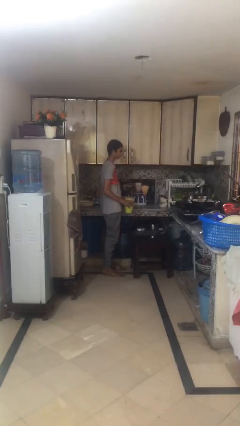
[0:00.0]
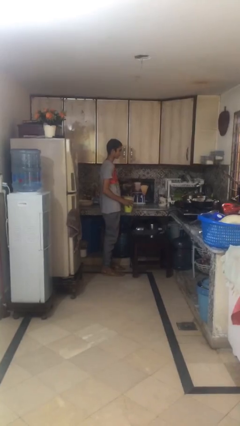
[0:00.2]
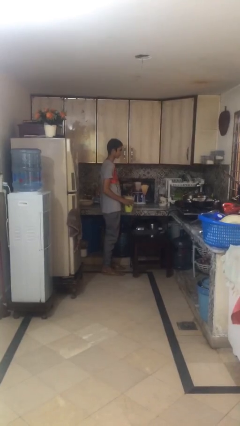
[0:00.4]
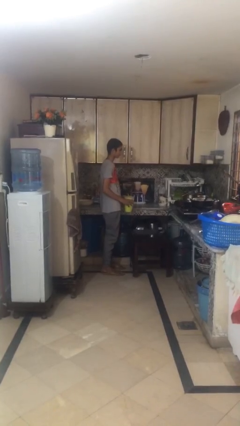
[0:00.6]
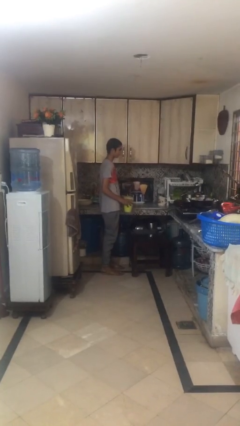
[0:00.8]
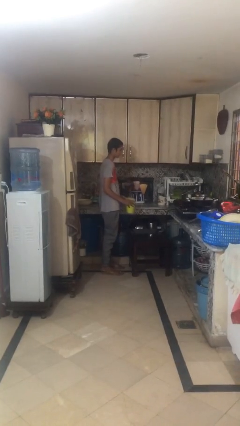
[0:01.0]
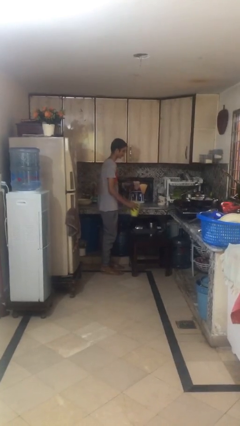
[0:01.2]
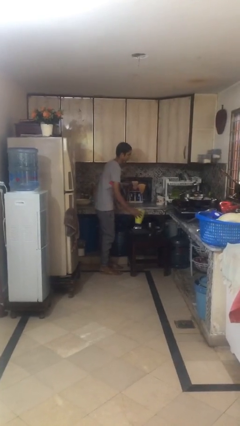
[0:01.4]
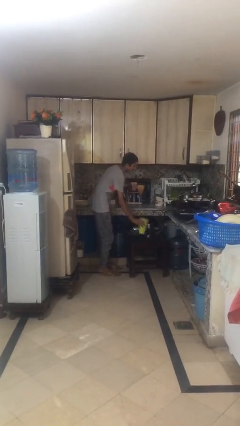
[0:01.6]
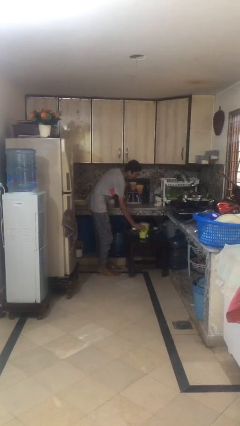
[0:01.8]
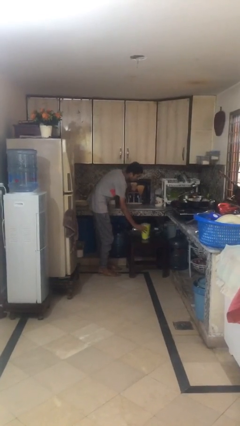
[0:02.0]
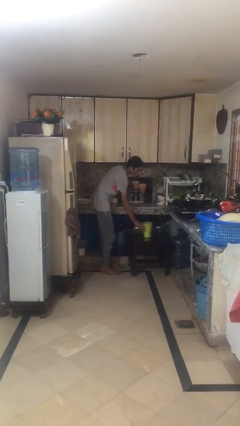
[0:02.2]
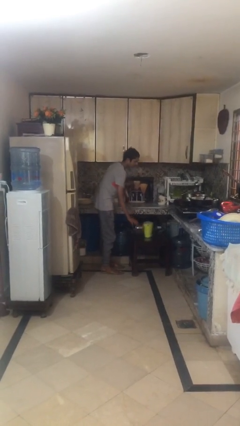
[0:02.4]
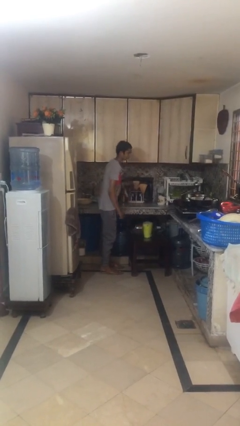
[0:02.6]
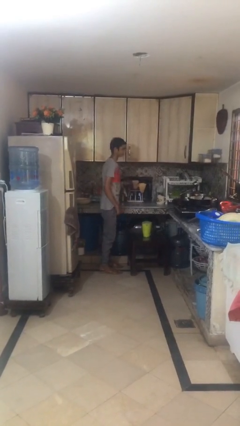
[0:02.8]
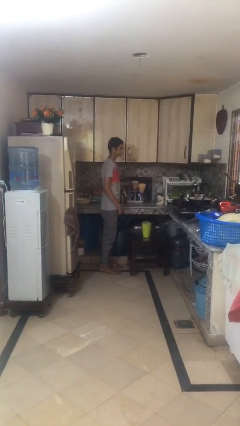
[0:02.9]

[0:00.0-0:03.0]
person puts down object on table

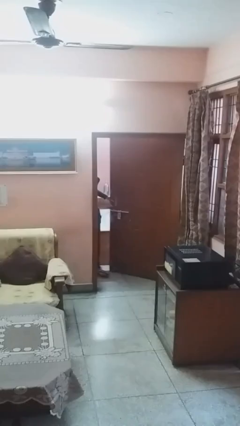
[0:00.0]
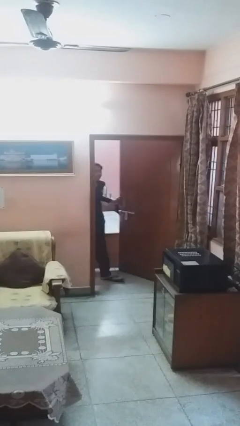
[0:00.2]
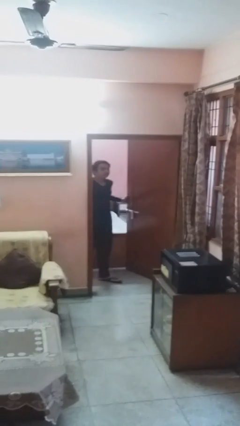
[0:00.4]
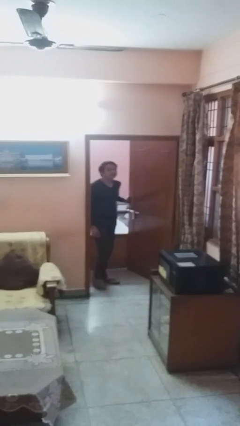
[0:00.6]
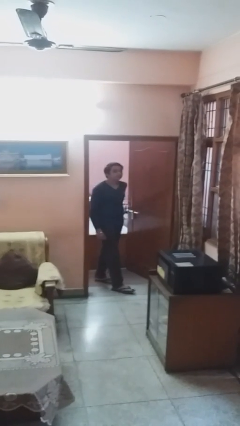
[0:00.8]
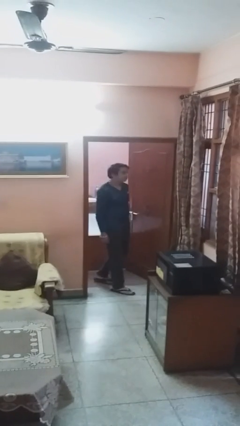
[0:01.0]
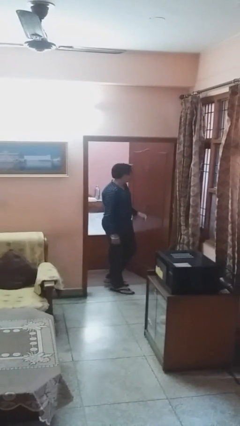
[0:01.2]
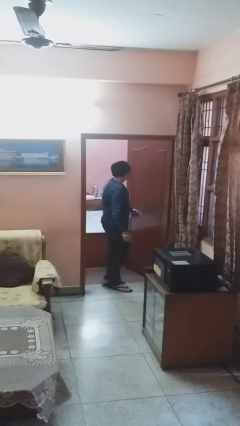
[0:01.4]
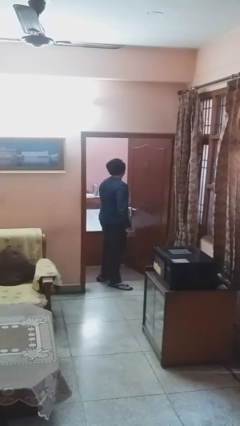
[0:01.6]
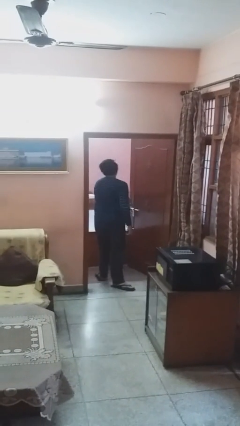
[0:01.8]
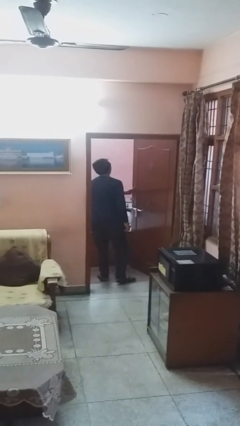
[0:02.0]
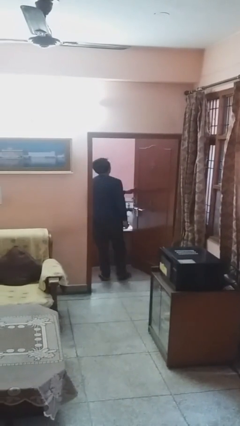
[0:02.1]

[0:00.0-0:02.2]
person opens facility door

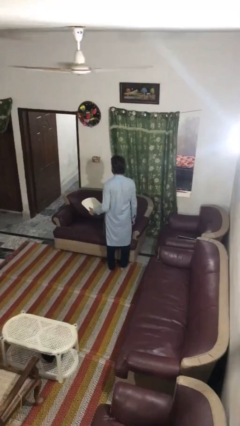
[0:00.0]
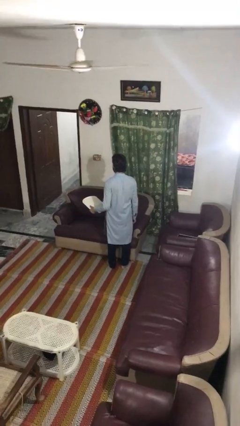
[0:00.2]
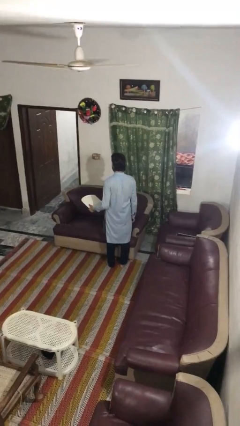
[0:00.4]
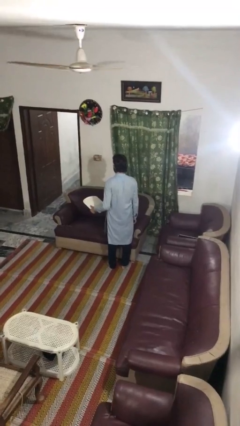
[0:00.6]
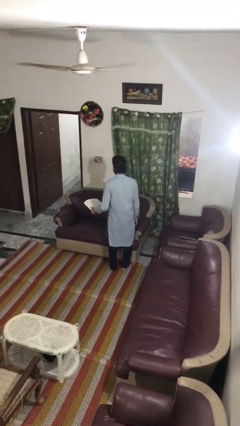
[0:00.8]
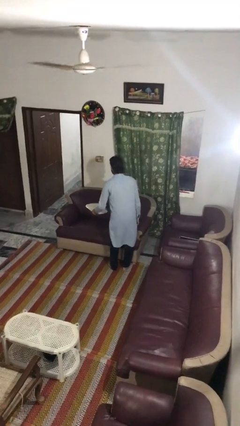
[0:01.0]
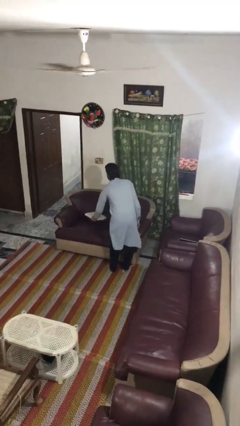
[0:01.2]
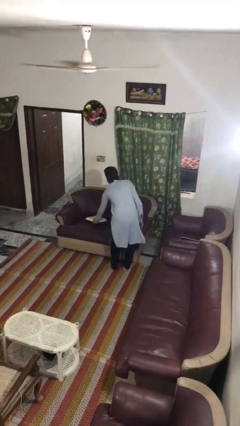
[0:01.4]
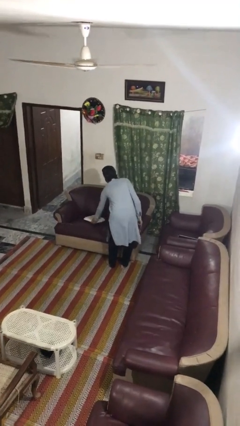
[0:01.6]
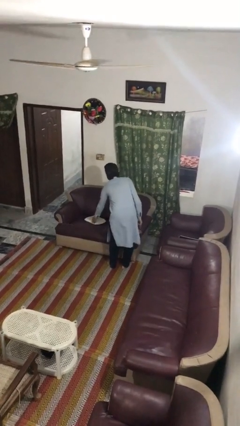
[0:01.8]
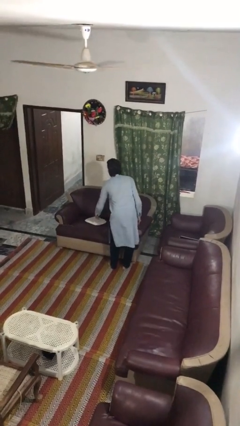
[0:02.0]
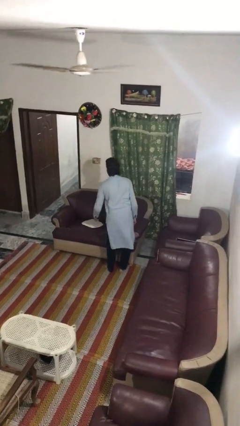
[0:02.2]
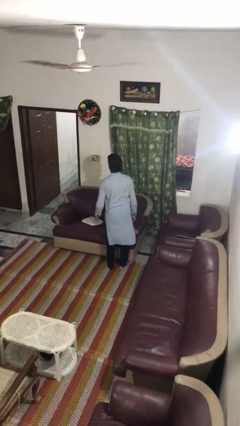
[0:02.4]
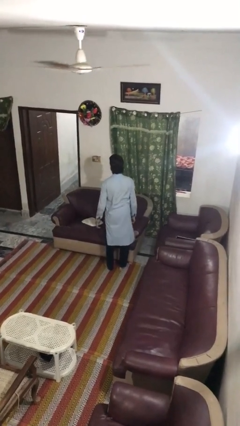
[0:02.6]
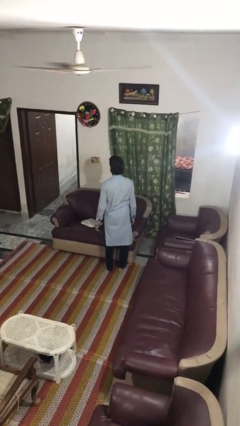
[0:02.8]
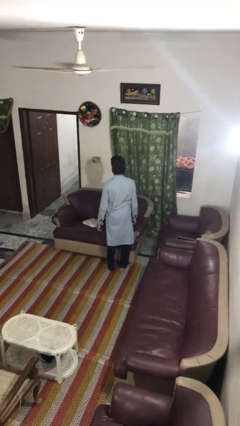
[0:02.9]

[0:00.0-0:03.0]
person puts down object on couch

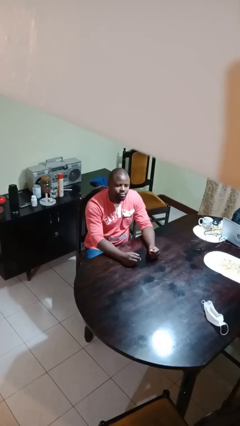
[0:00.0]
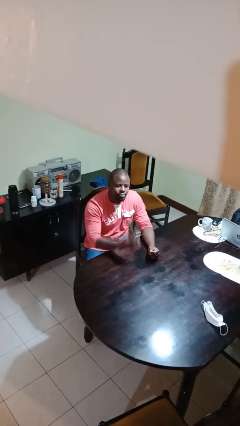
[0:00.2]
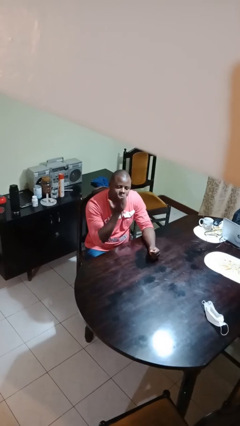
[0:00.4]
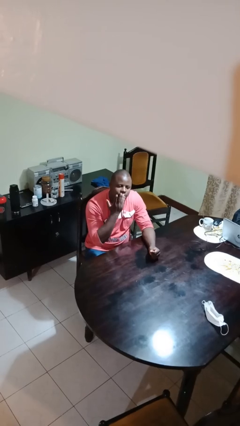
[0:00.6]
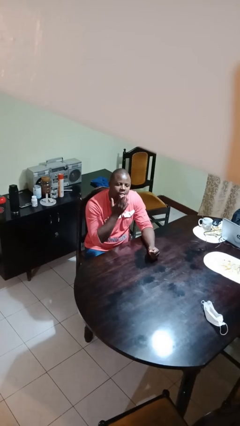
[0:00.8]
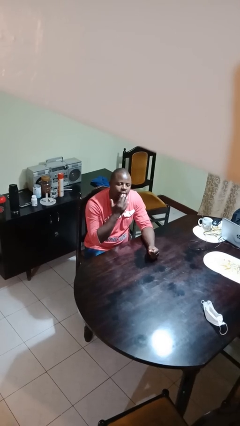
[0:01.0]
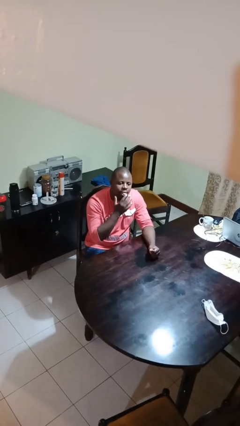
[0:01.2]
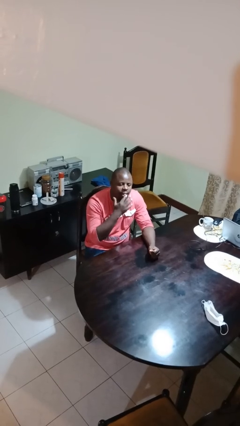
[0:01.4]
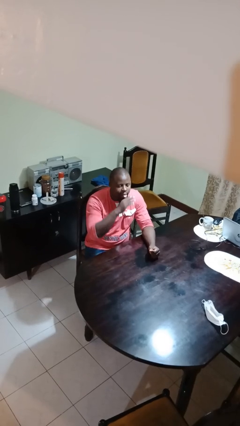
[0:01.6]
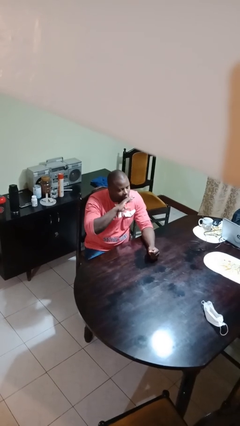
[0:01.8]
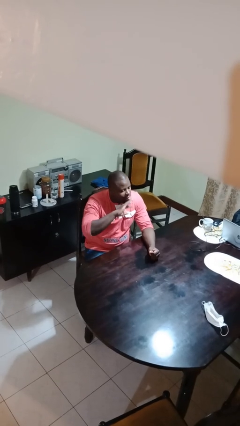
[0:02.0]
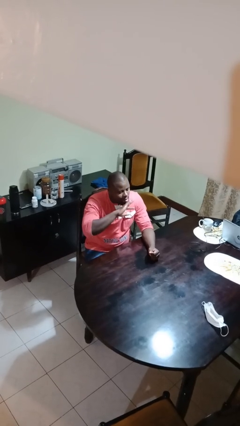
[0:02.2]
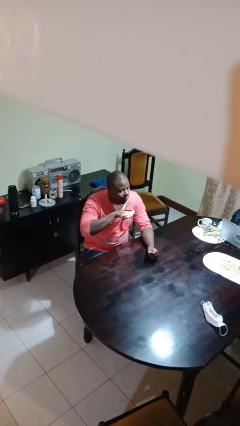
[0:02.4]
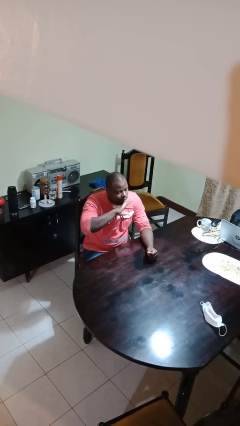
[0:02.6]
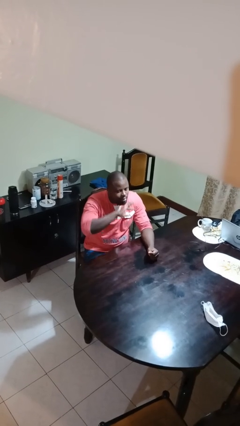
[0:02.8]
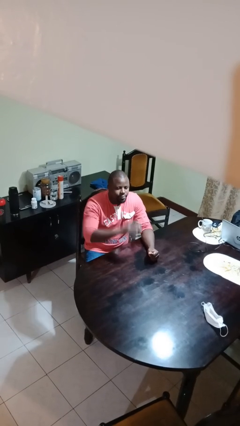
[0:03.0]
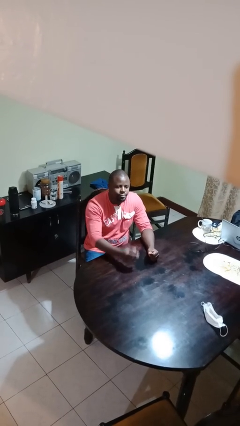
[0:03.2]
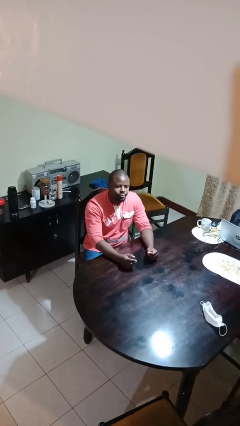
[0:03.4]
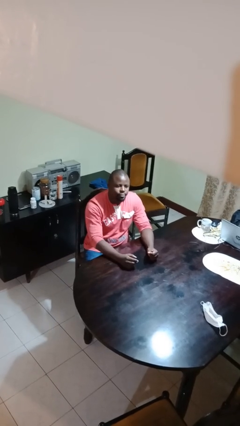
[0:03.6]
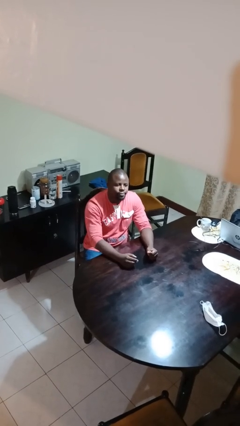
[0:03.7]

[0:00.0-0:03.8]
person licks fingers

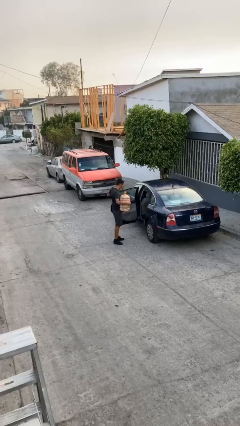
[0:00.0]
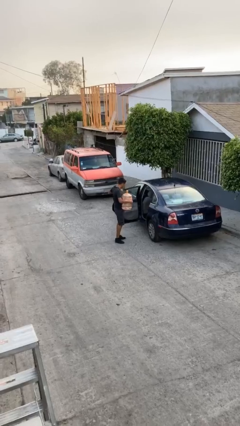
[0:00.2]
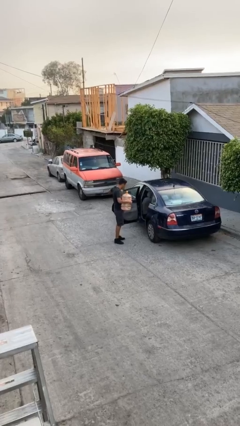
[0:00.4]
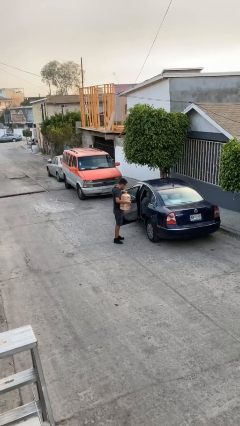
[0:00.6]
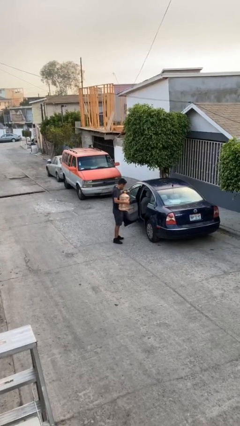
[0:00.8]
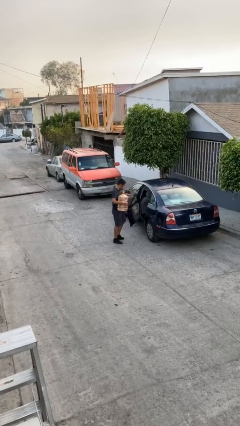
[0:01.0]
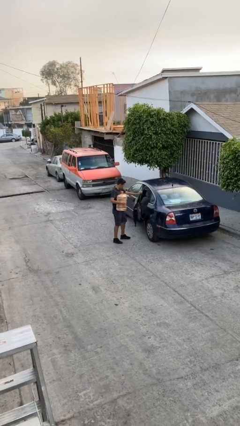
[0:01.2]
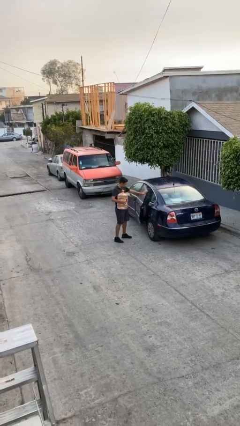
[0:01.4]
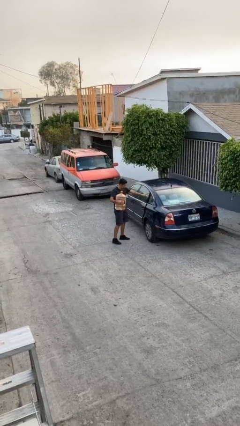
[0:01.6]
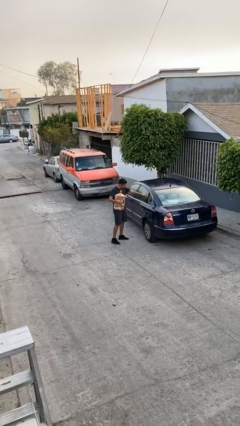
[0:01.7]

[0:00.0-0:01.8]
person closes car door

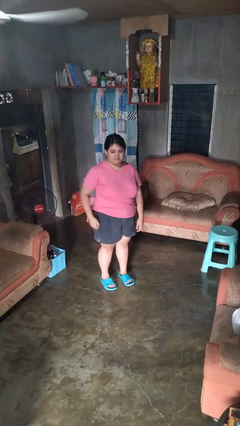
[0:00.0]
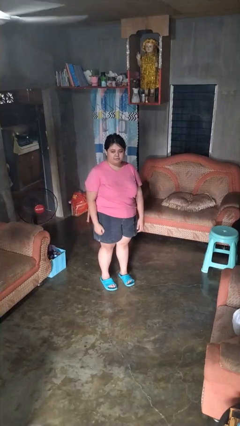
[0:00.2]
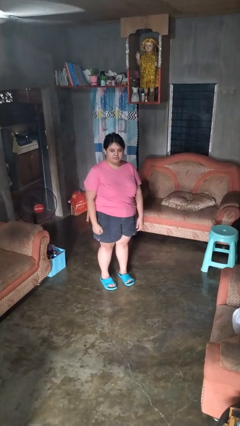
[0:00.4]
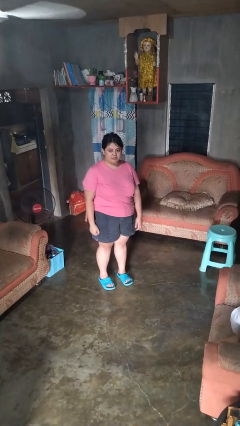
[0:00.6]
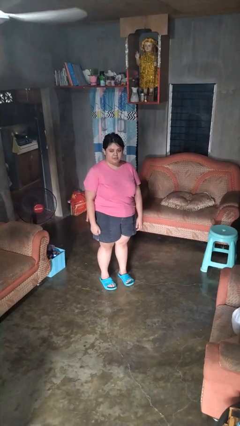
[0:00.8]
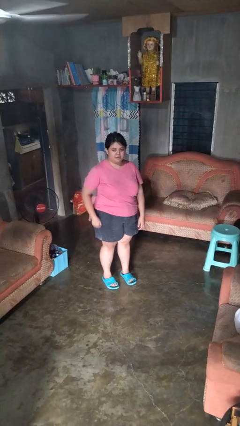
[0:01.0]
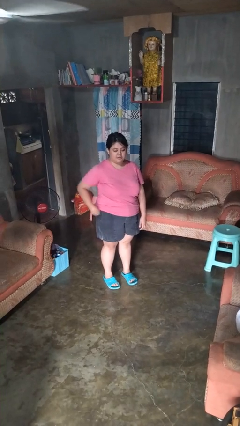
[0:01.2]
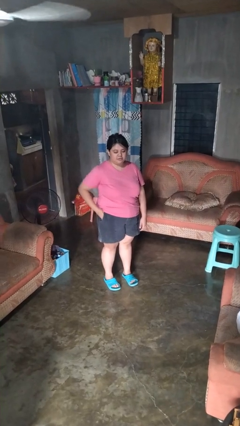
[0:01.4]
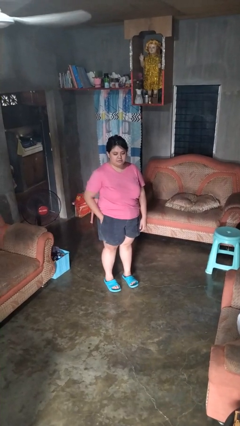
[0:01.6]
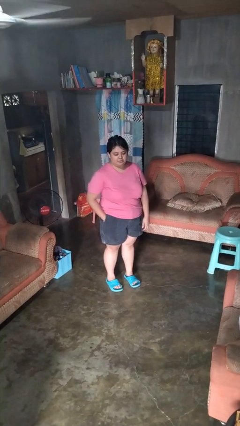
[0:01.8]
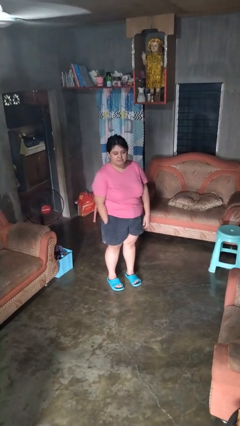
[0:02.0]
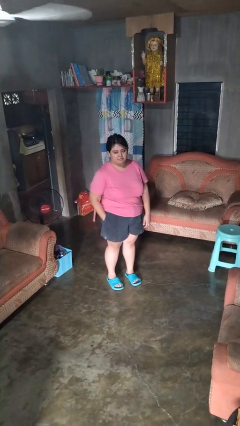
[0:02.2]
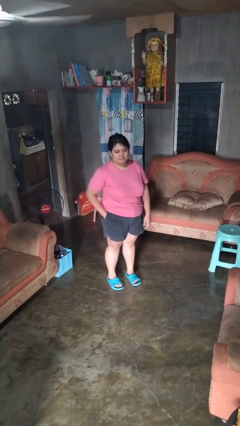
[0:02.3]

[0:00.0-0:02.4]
person takes phone from pocket

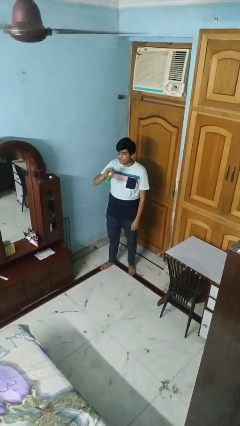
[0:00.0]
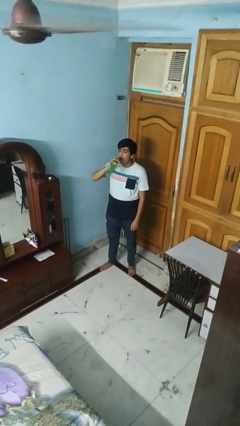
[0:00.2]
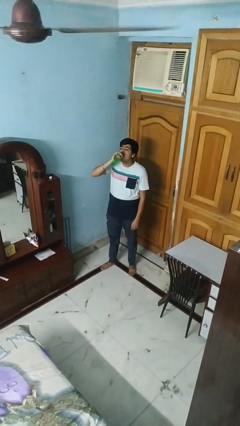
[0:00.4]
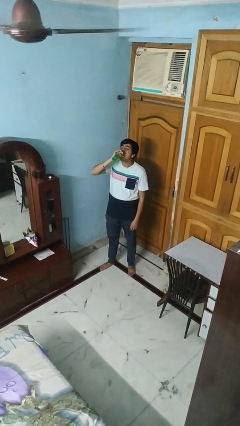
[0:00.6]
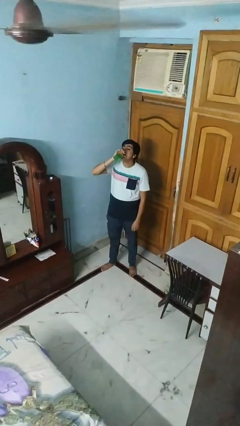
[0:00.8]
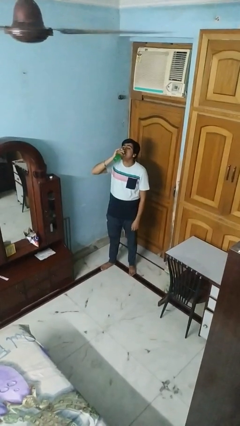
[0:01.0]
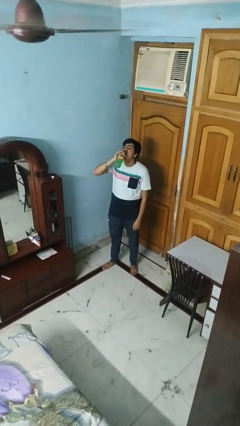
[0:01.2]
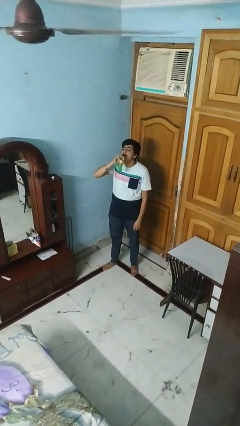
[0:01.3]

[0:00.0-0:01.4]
person drinks from bottle
